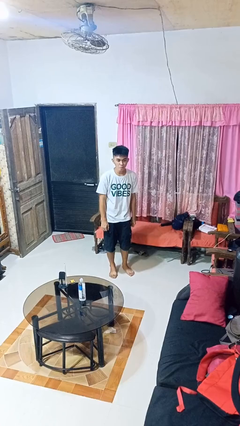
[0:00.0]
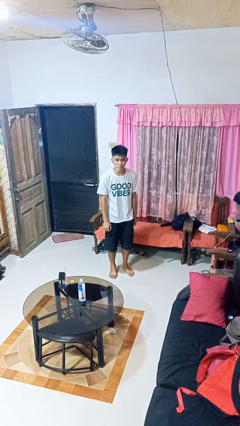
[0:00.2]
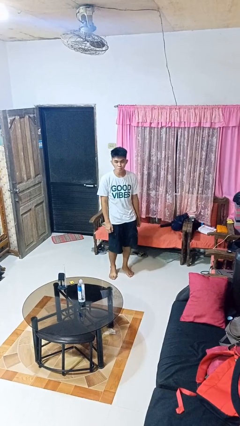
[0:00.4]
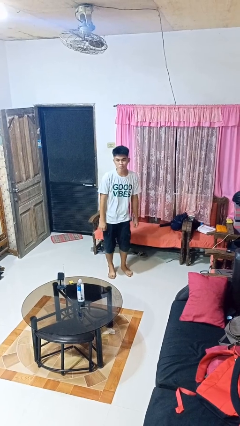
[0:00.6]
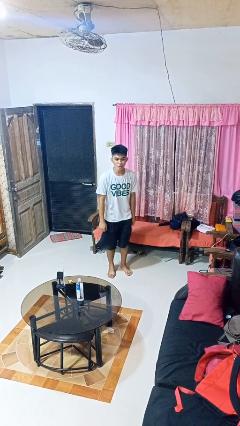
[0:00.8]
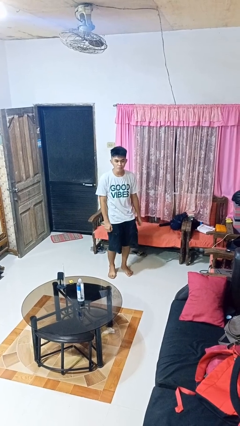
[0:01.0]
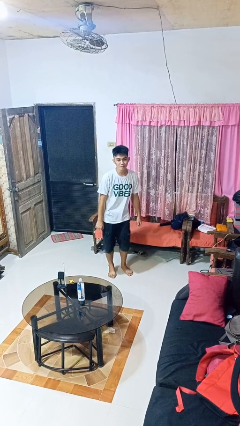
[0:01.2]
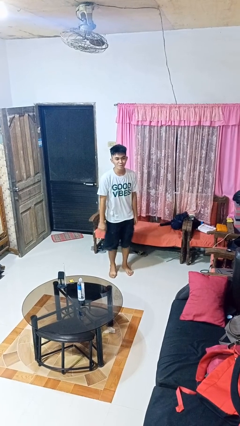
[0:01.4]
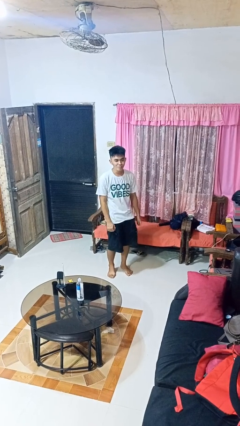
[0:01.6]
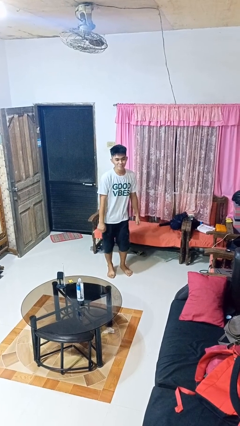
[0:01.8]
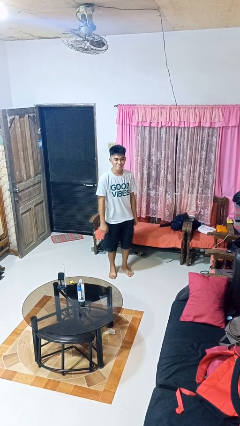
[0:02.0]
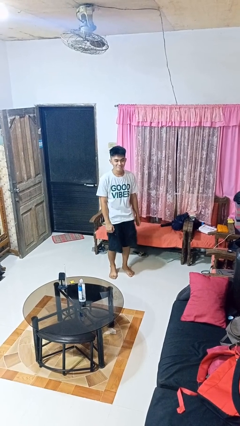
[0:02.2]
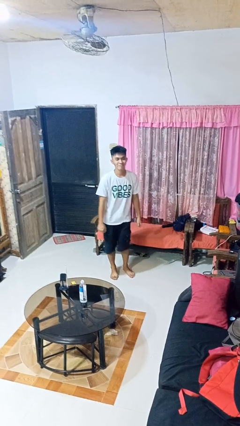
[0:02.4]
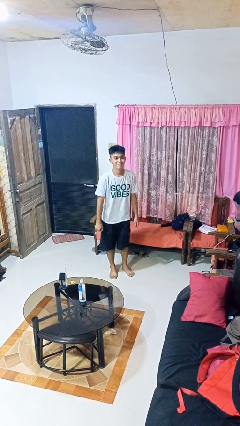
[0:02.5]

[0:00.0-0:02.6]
person wiggles hips

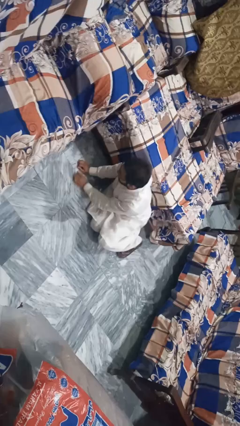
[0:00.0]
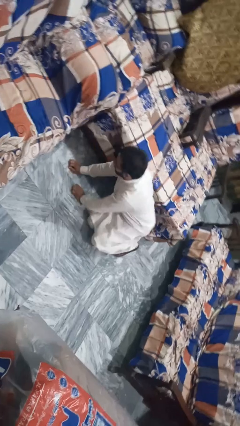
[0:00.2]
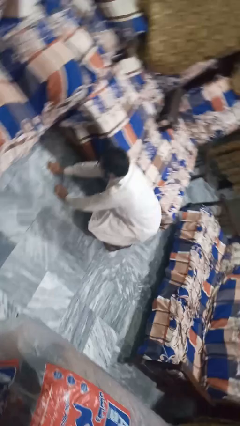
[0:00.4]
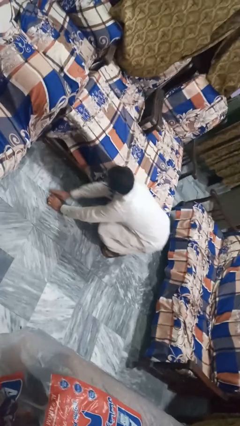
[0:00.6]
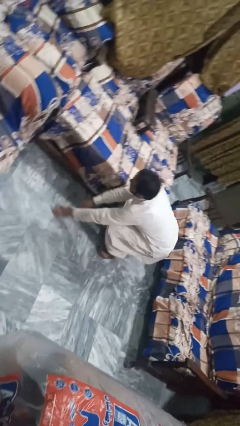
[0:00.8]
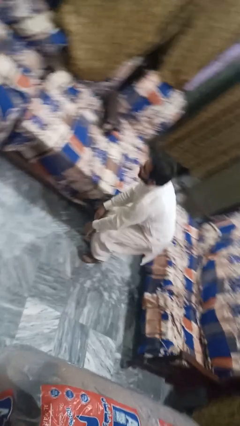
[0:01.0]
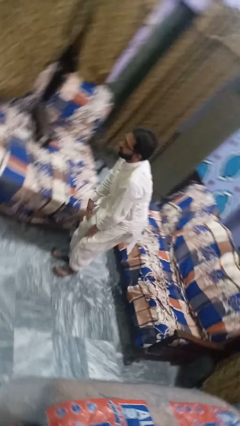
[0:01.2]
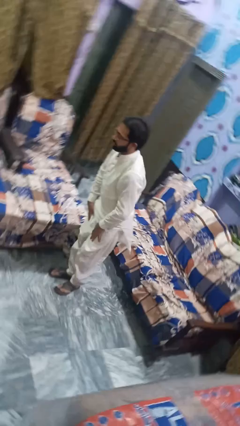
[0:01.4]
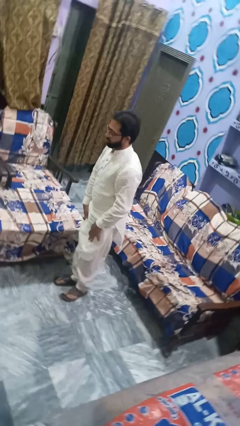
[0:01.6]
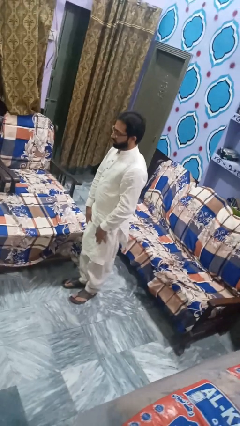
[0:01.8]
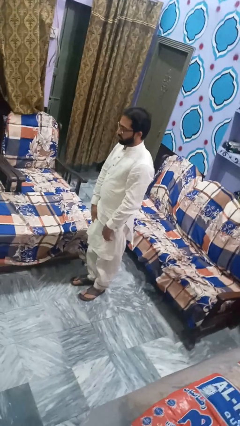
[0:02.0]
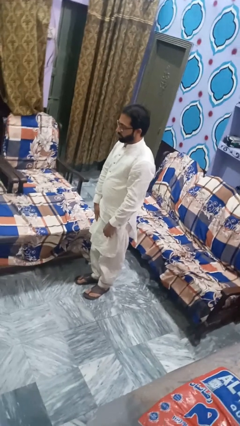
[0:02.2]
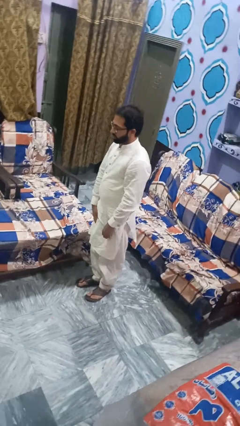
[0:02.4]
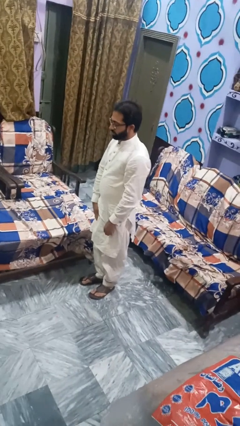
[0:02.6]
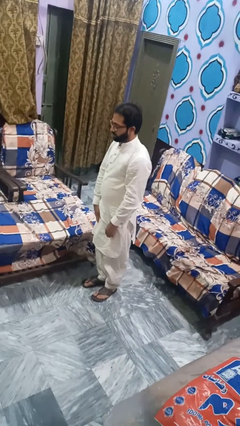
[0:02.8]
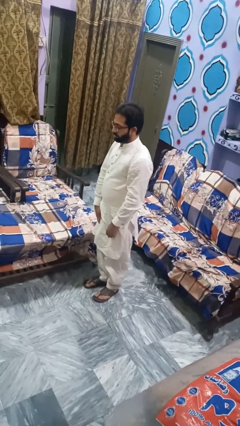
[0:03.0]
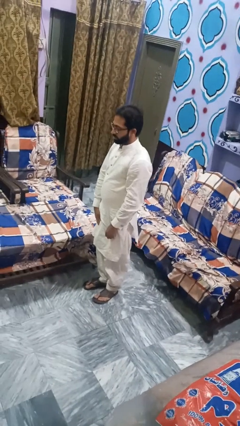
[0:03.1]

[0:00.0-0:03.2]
person stands up from floor

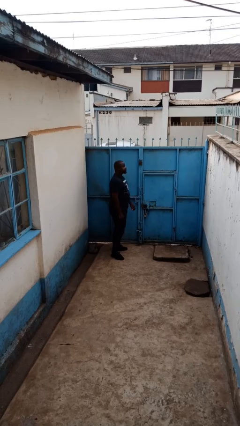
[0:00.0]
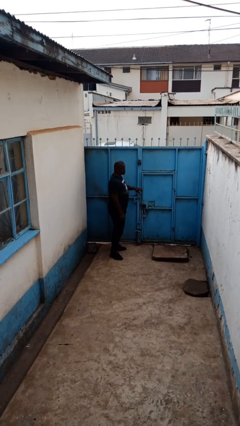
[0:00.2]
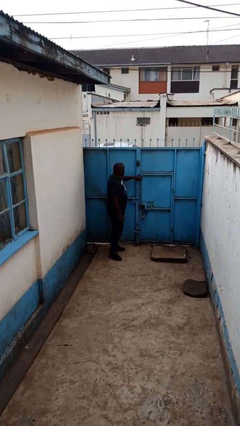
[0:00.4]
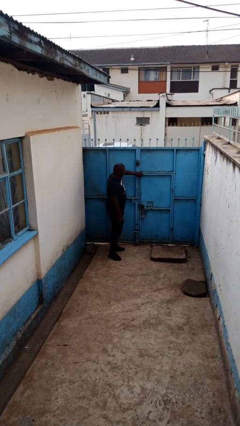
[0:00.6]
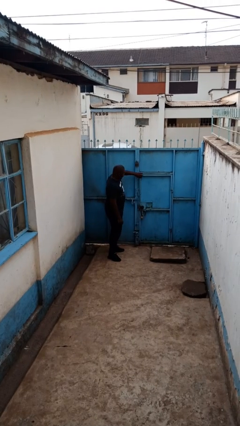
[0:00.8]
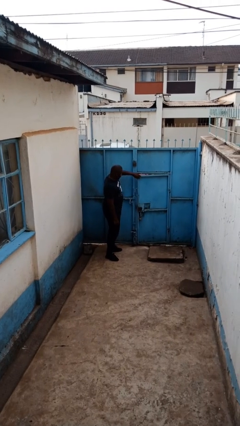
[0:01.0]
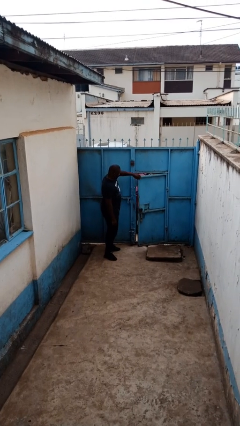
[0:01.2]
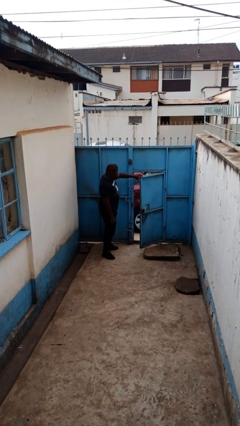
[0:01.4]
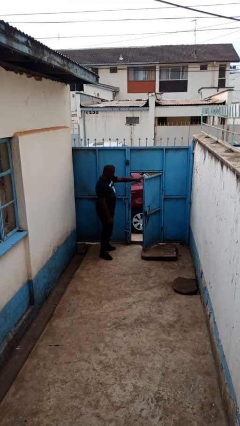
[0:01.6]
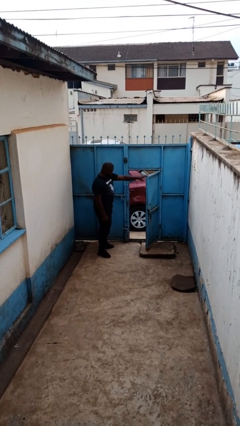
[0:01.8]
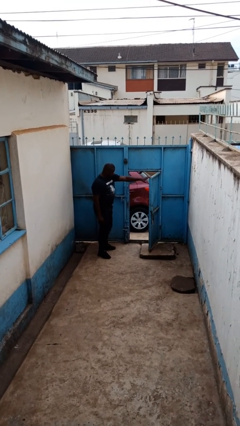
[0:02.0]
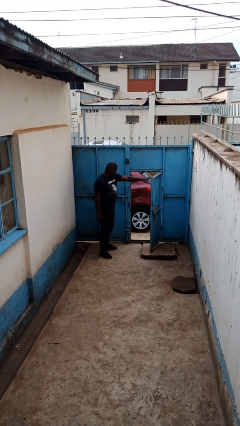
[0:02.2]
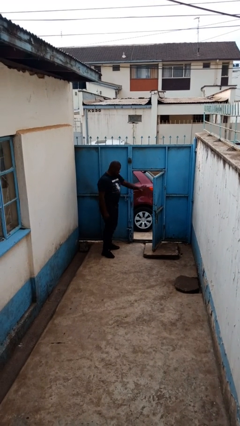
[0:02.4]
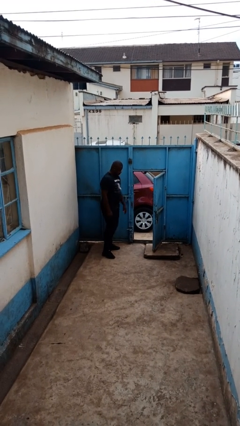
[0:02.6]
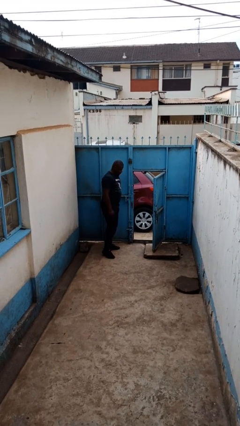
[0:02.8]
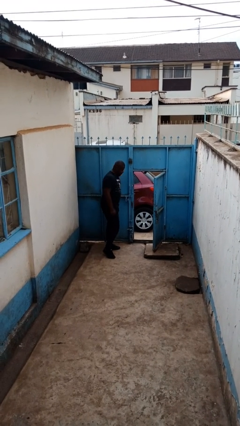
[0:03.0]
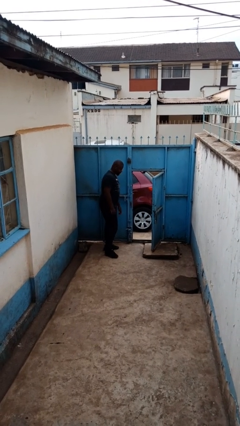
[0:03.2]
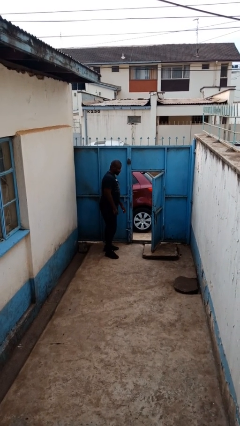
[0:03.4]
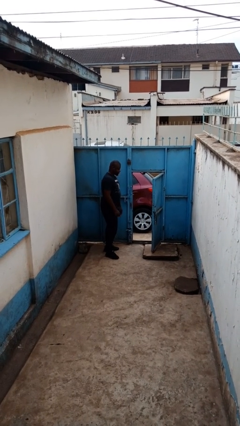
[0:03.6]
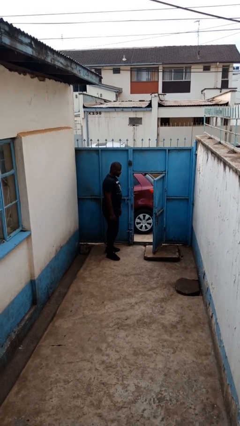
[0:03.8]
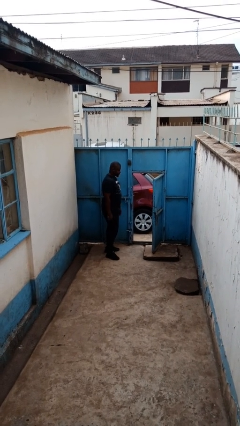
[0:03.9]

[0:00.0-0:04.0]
person opens gate

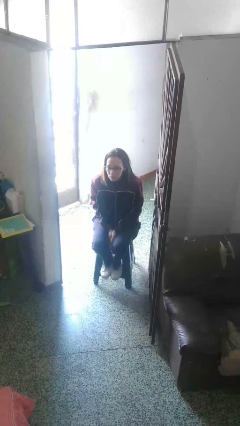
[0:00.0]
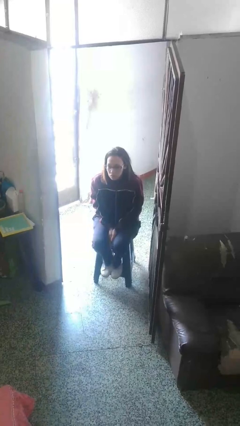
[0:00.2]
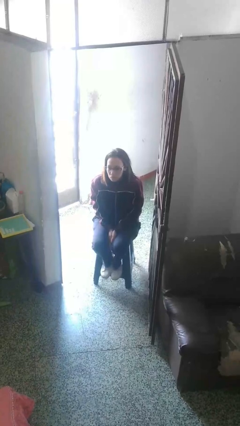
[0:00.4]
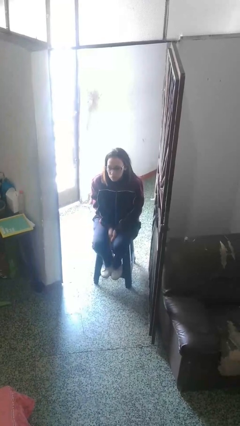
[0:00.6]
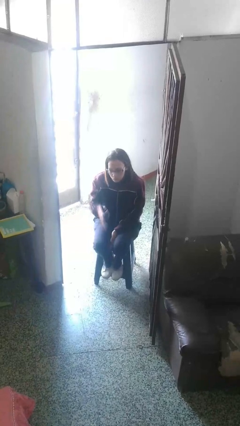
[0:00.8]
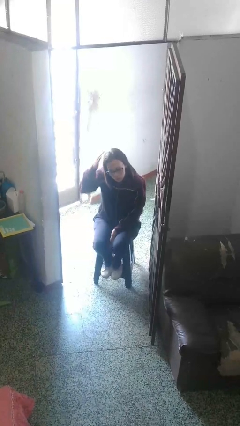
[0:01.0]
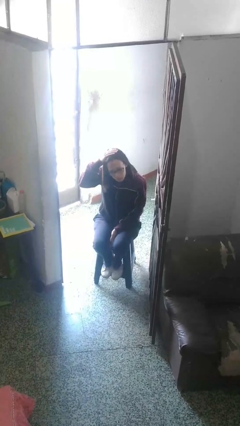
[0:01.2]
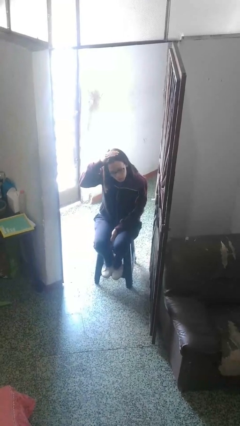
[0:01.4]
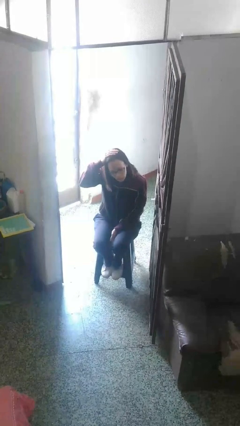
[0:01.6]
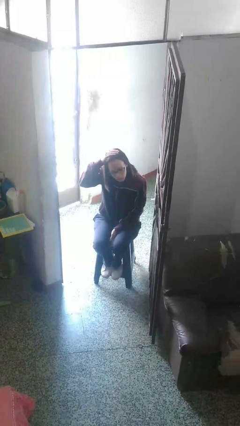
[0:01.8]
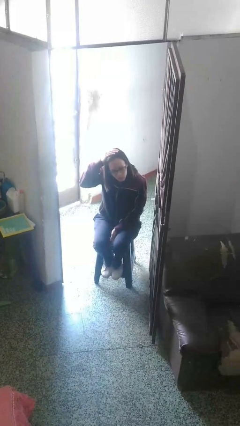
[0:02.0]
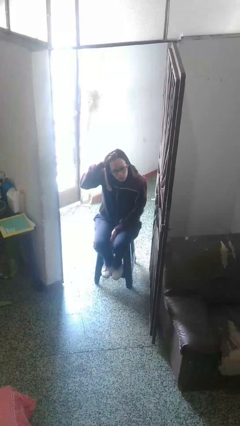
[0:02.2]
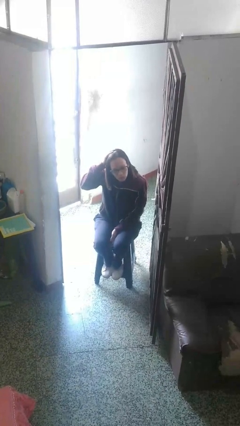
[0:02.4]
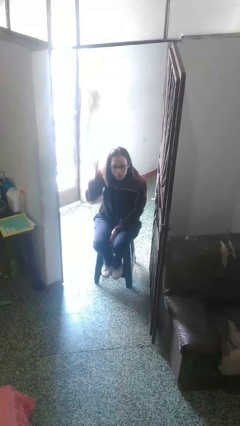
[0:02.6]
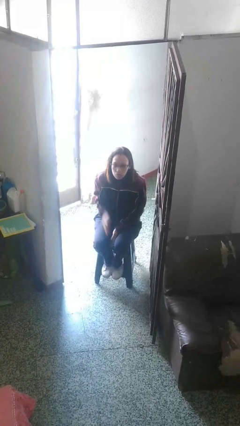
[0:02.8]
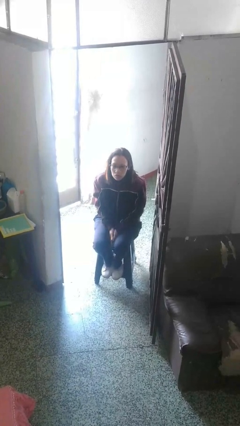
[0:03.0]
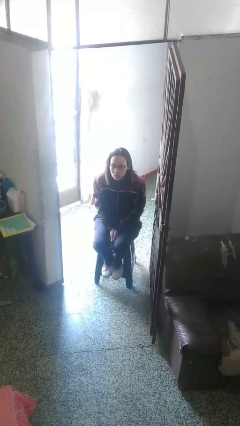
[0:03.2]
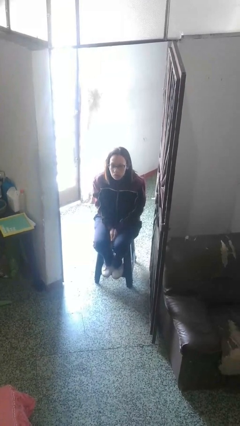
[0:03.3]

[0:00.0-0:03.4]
person pats head

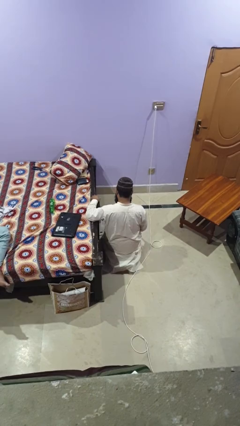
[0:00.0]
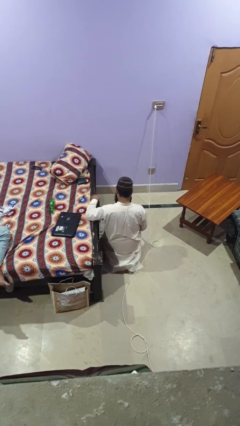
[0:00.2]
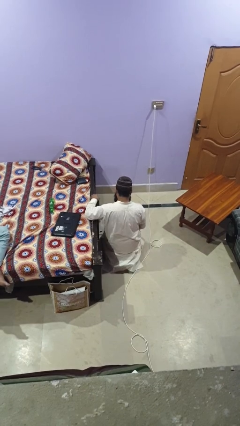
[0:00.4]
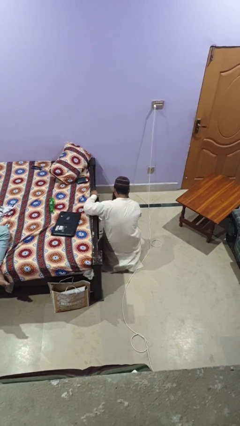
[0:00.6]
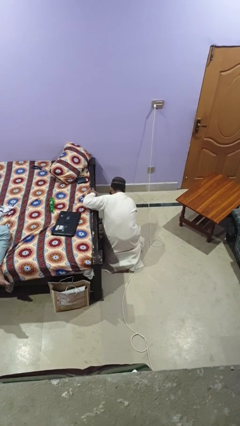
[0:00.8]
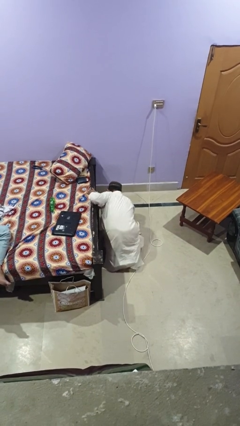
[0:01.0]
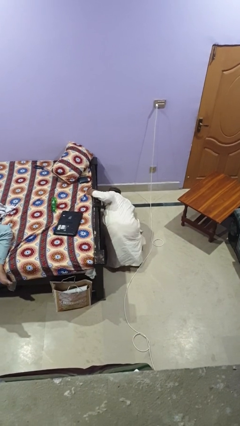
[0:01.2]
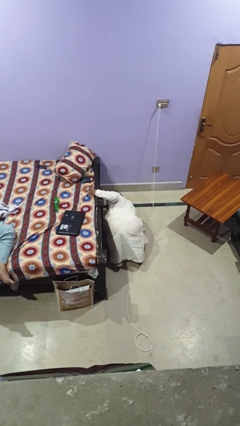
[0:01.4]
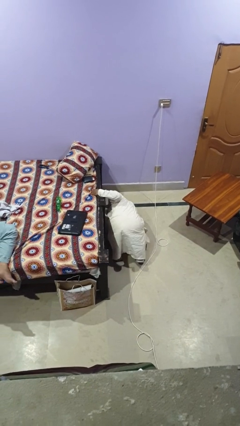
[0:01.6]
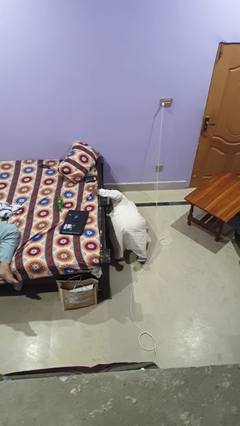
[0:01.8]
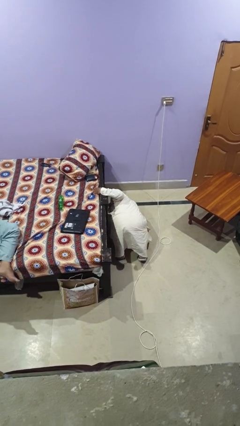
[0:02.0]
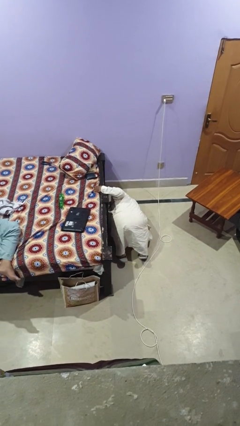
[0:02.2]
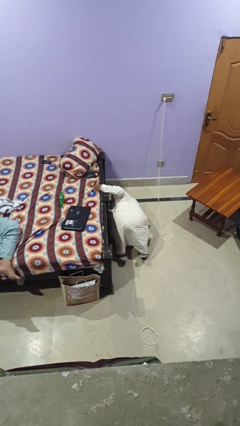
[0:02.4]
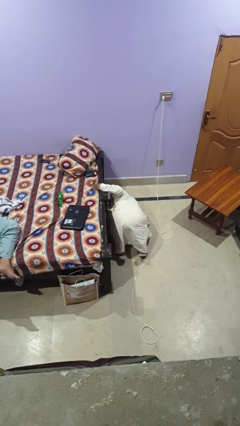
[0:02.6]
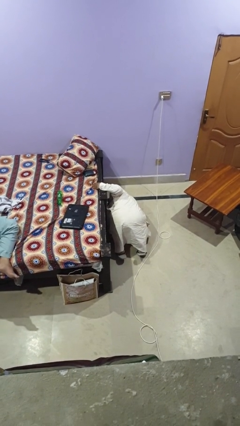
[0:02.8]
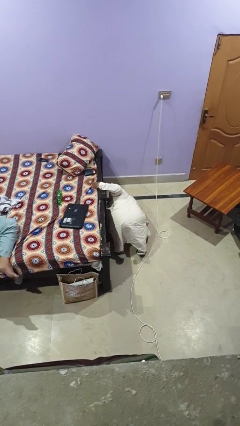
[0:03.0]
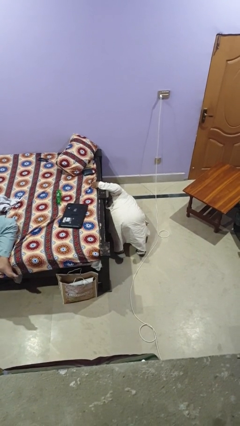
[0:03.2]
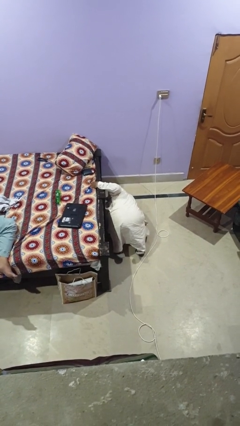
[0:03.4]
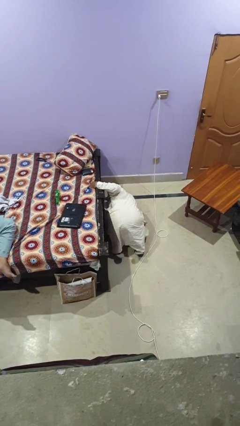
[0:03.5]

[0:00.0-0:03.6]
person searches under bed

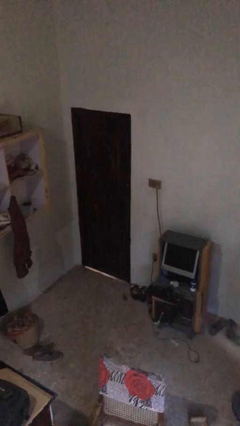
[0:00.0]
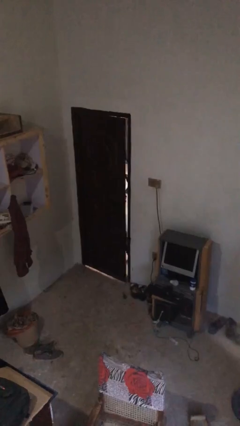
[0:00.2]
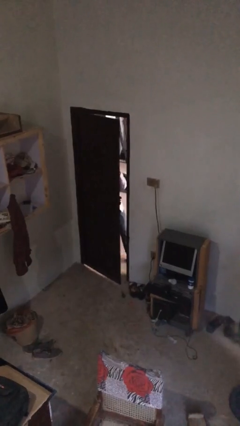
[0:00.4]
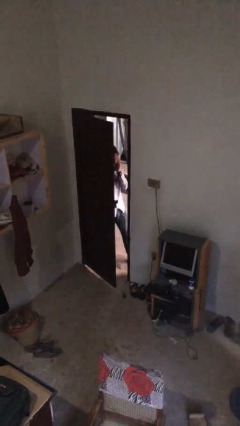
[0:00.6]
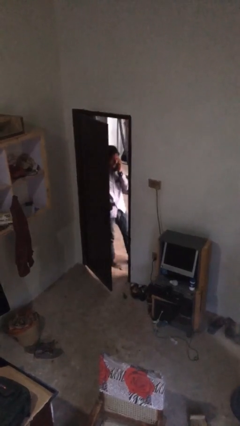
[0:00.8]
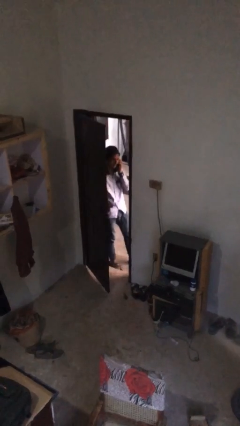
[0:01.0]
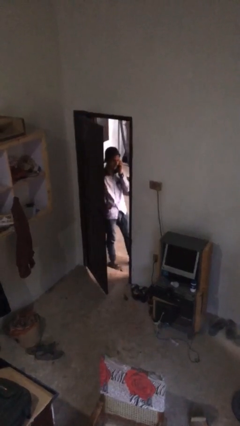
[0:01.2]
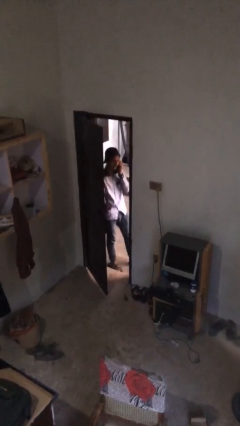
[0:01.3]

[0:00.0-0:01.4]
person opens facility door
